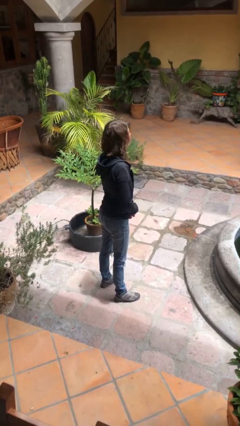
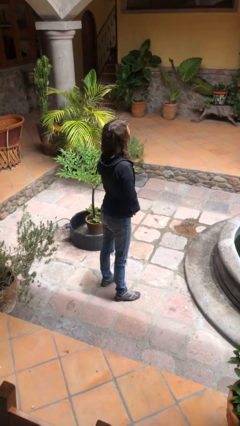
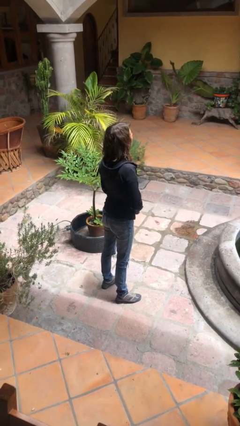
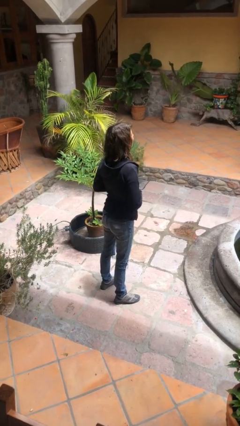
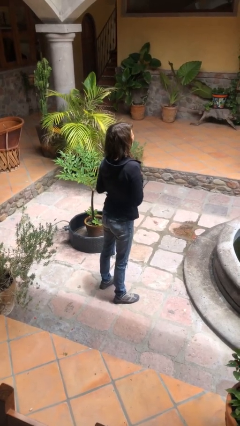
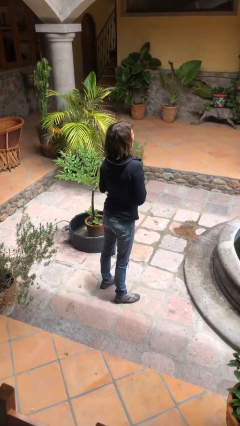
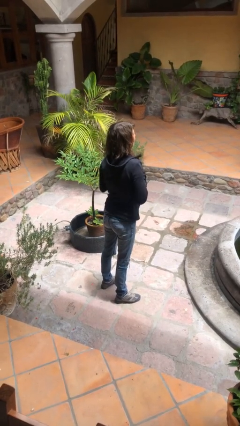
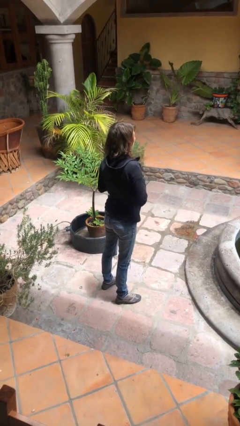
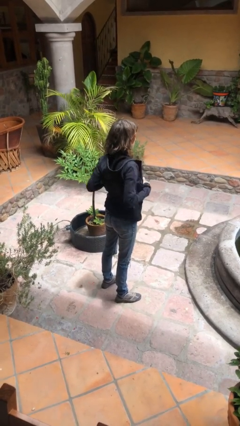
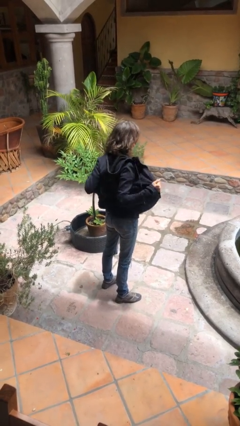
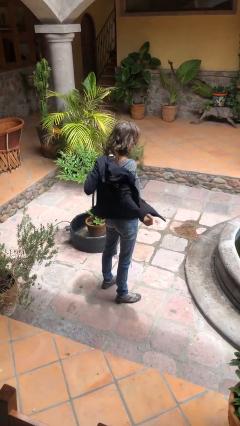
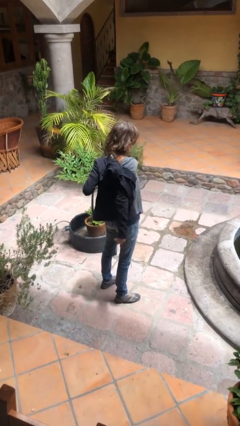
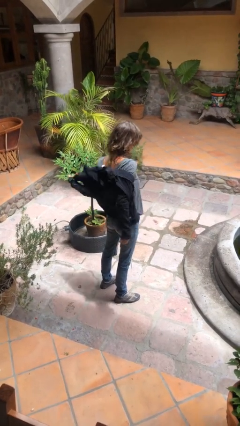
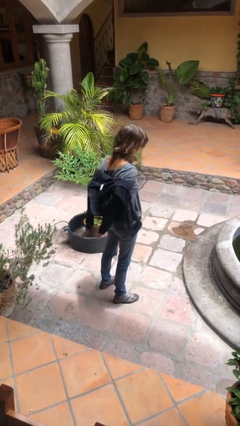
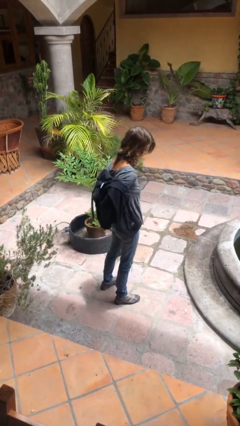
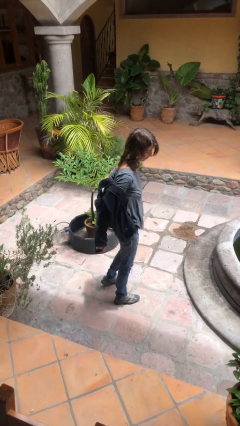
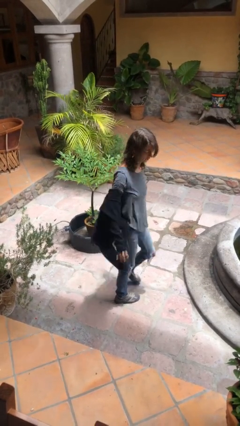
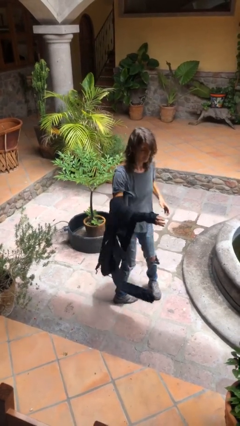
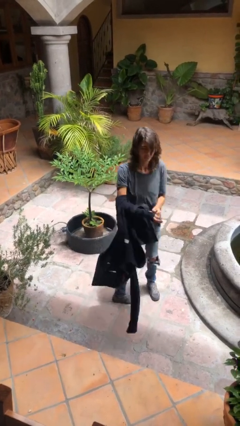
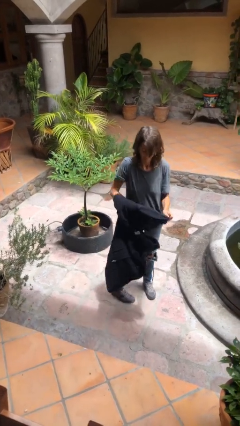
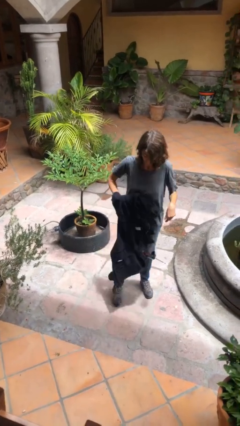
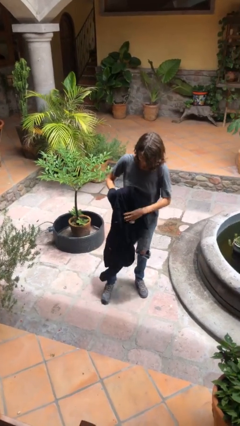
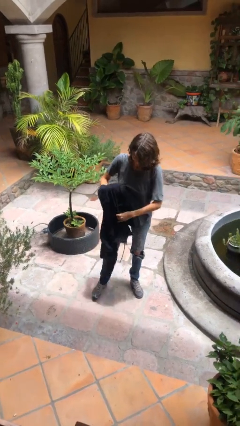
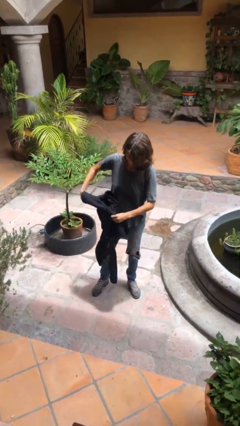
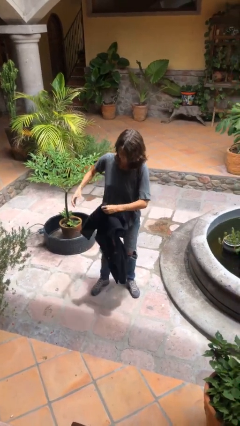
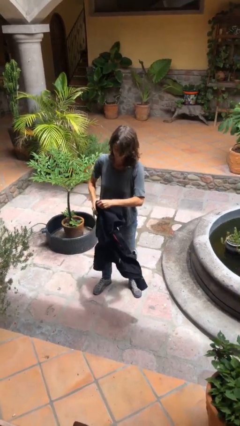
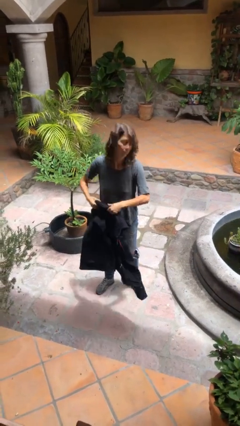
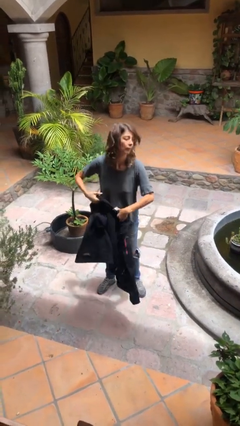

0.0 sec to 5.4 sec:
person takes off jacket

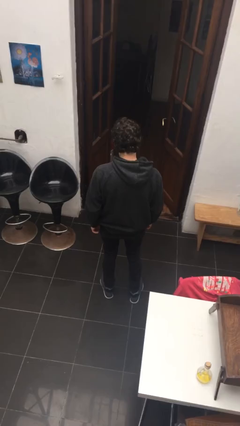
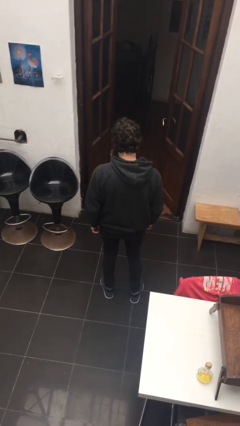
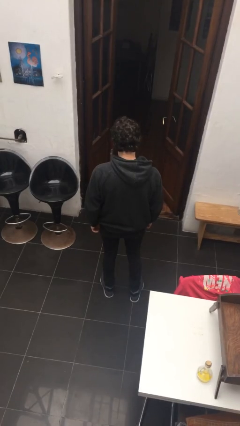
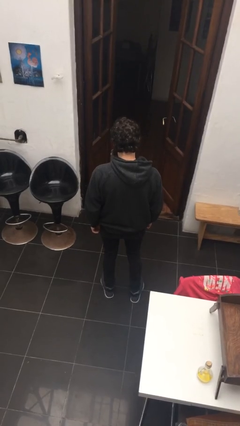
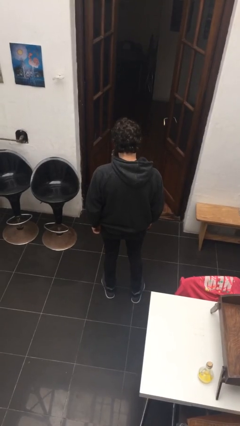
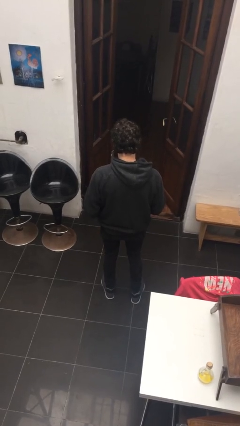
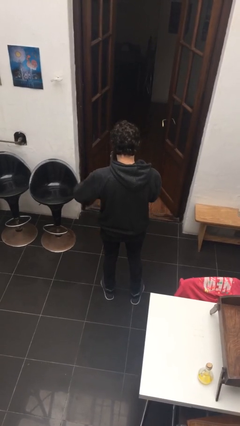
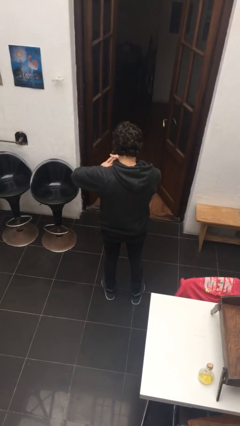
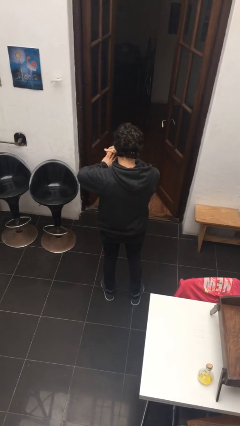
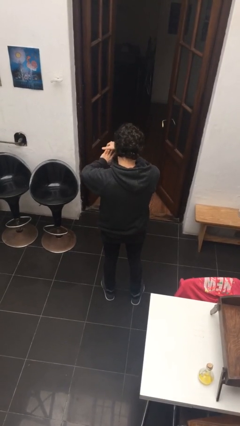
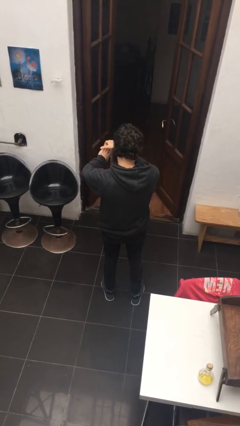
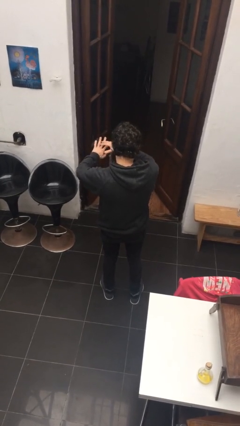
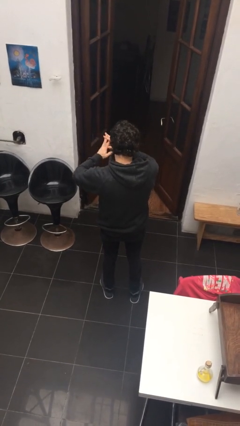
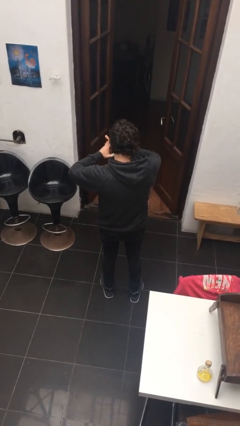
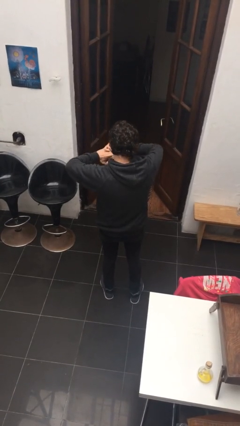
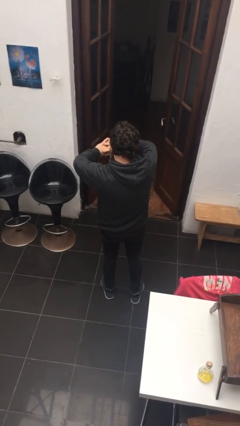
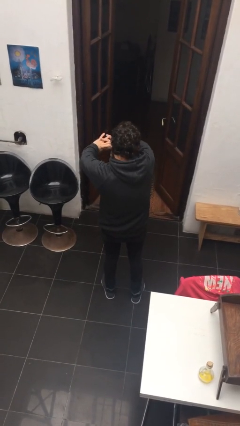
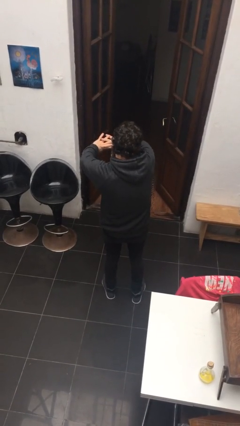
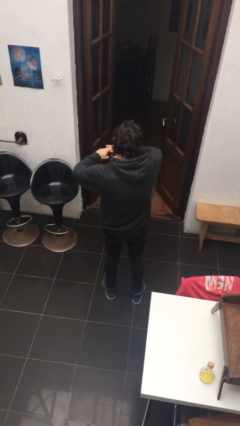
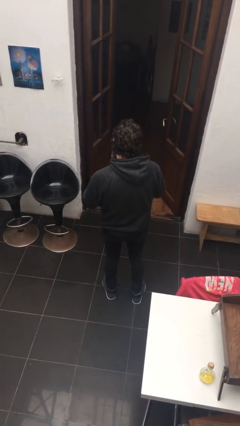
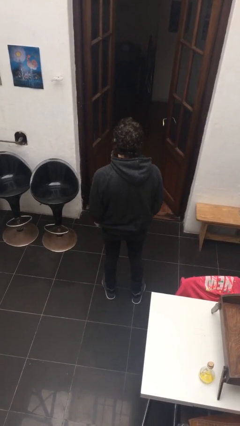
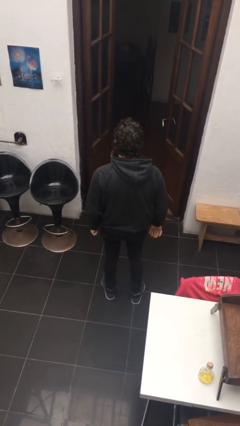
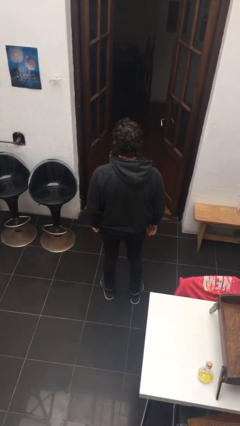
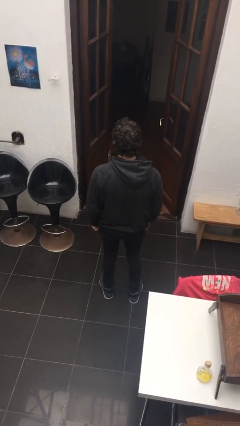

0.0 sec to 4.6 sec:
person cracks knuckles

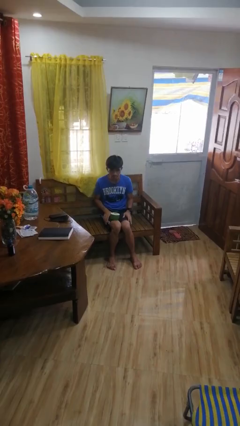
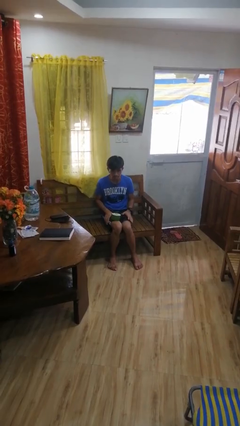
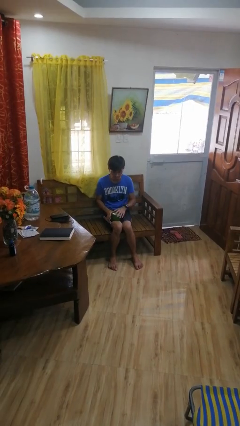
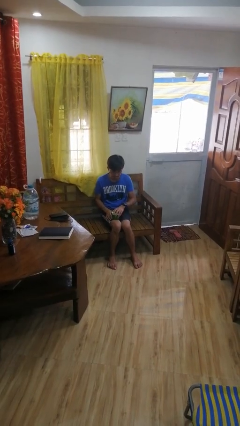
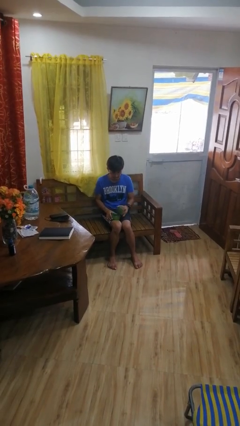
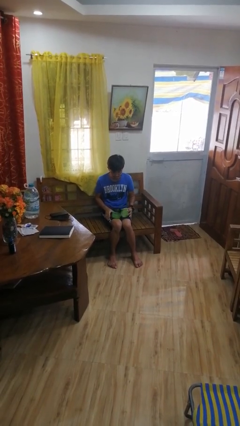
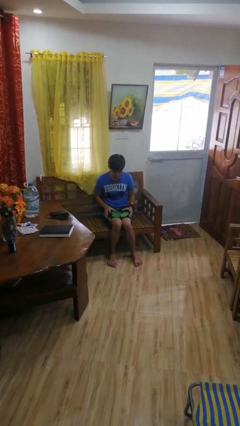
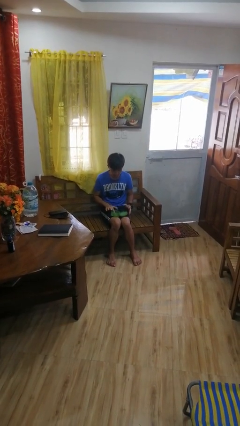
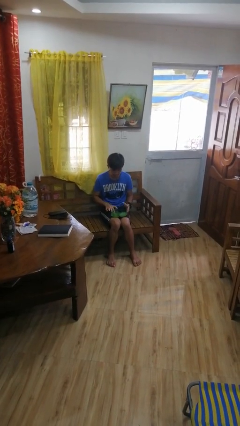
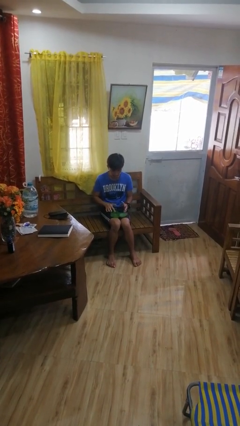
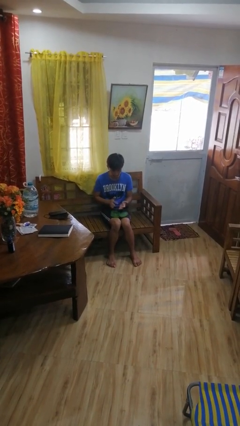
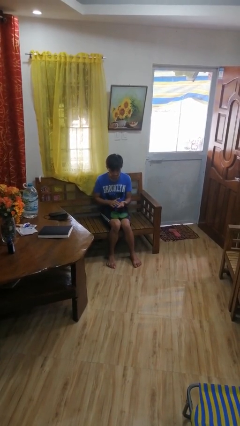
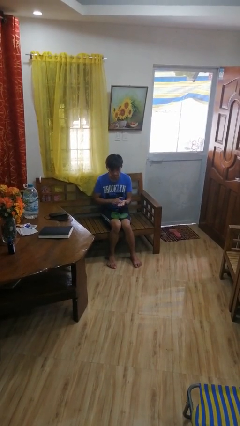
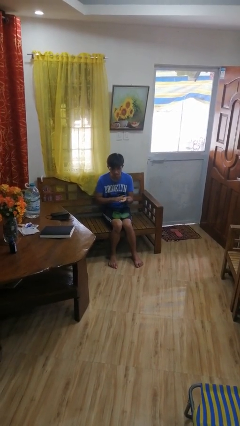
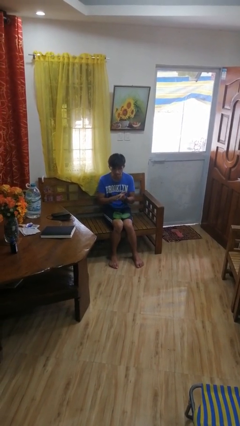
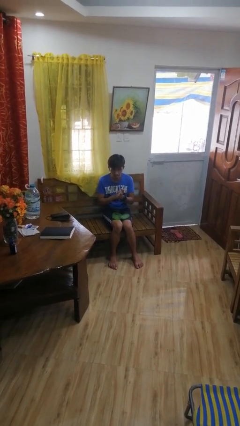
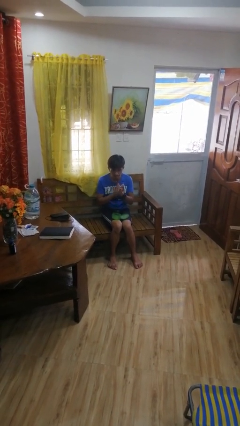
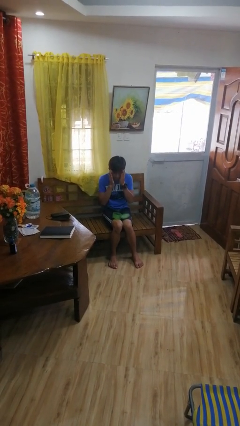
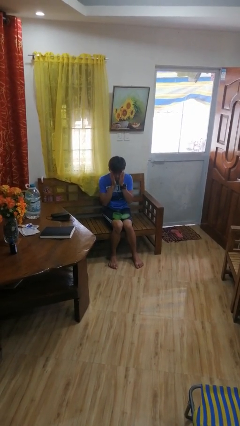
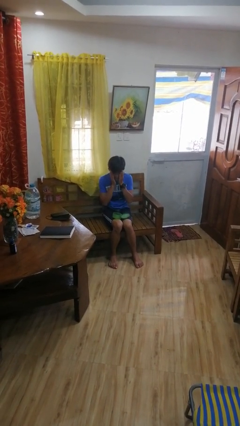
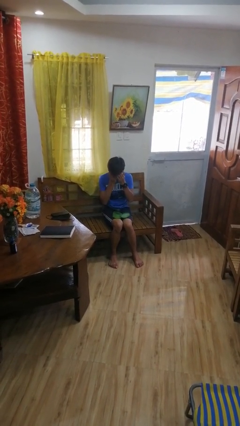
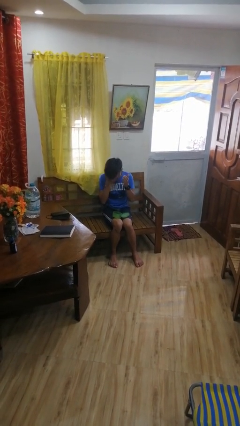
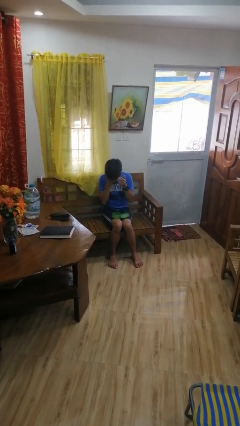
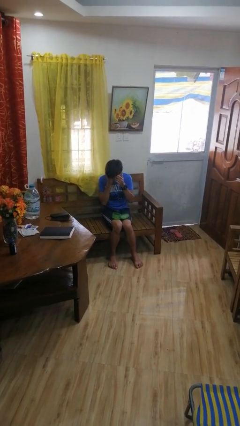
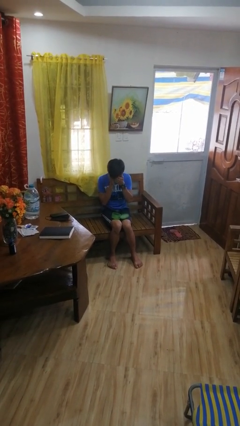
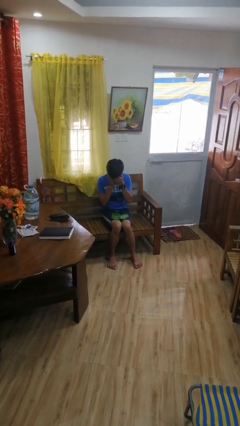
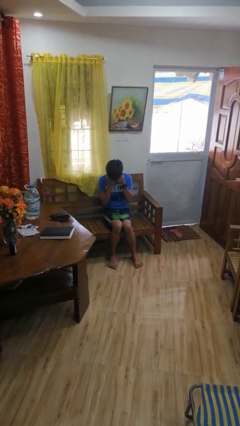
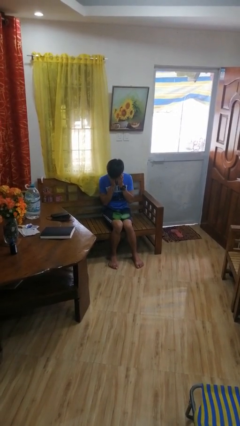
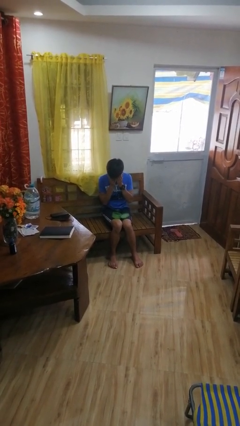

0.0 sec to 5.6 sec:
person applies facial moisturizer

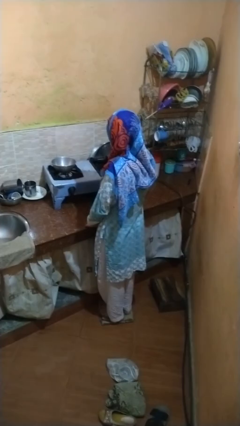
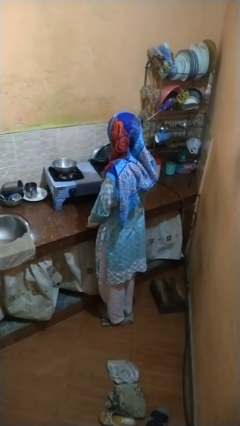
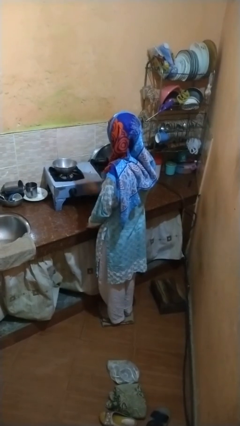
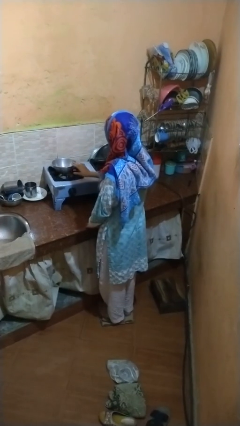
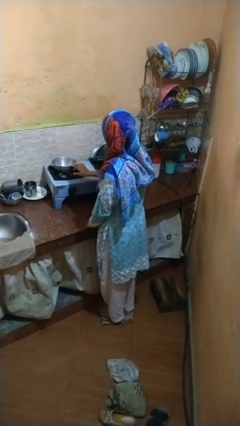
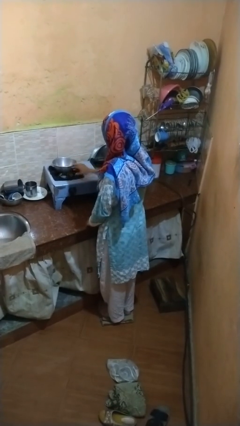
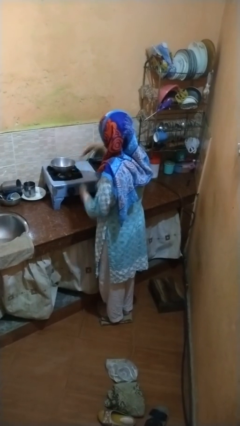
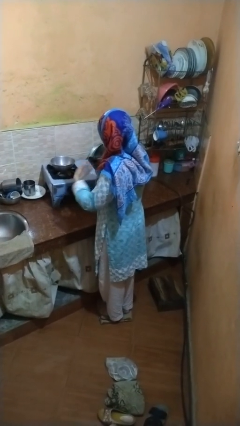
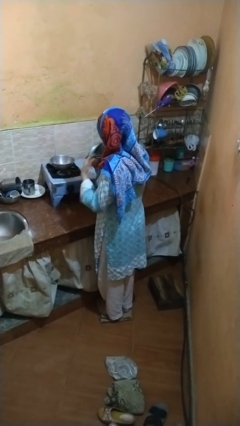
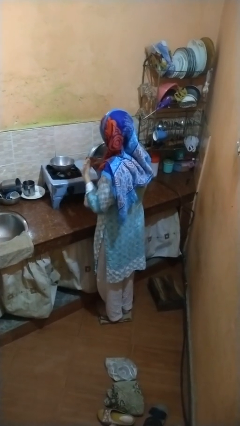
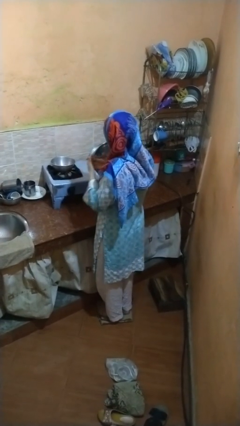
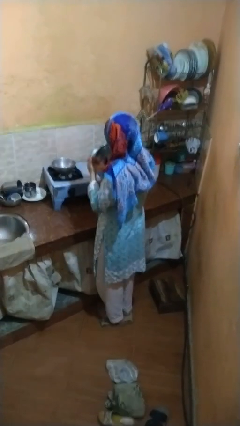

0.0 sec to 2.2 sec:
person burns hand
